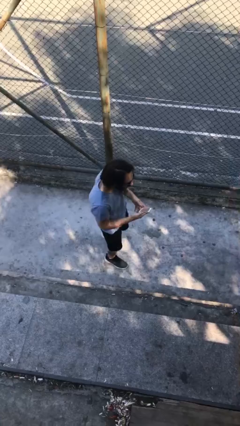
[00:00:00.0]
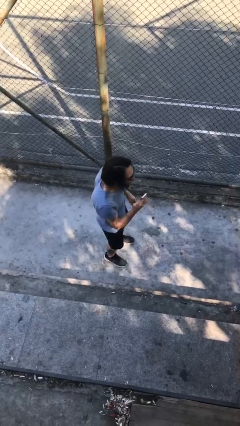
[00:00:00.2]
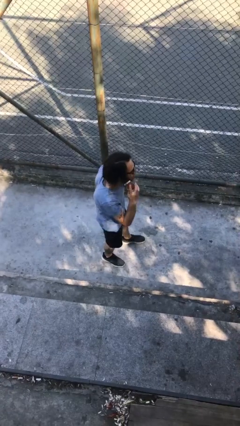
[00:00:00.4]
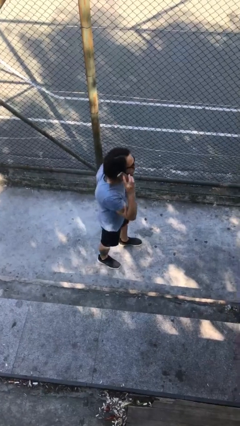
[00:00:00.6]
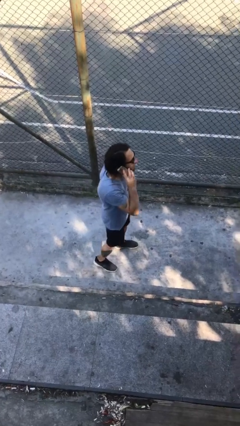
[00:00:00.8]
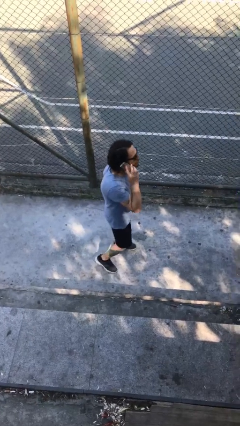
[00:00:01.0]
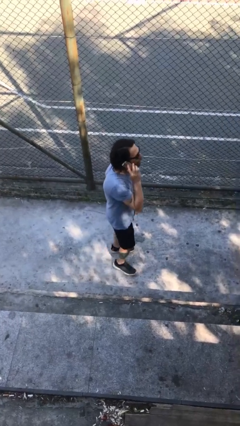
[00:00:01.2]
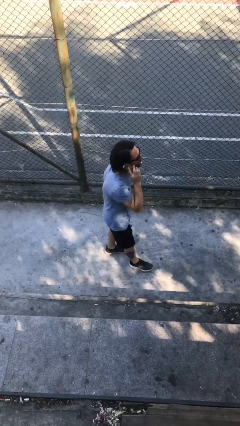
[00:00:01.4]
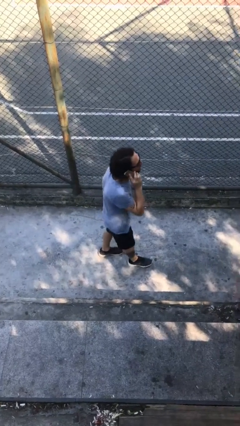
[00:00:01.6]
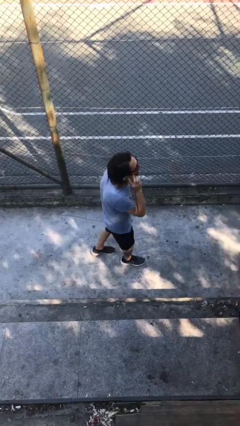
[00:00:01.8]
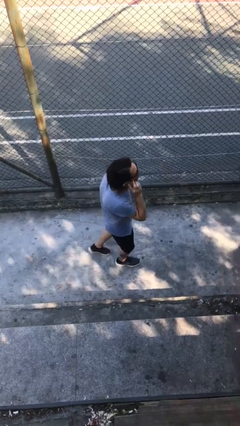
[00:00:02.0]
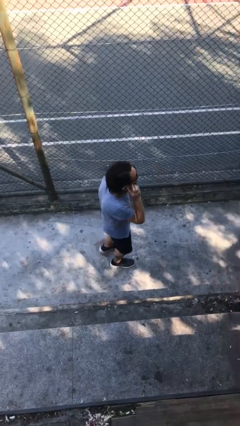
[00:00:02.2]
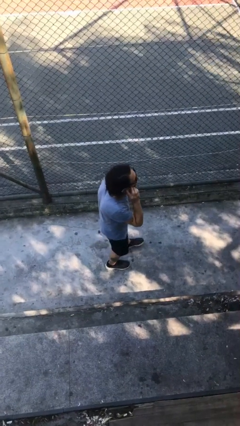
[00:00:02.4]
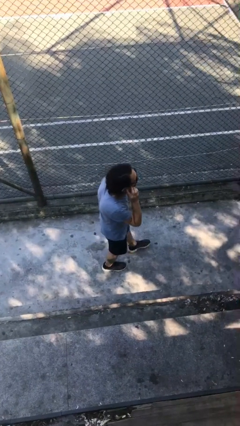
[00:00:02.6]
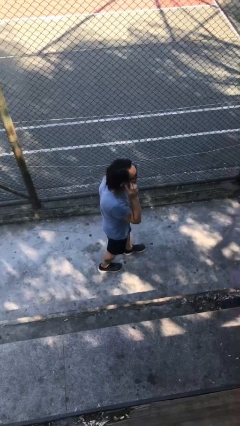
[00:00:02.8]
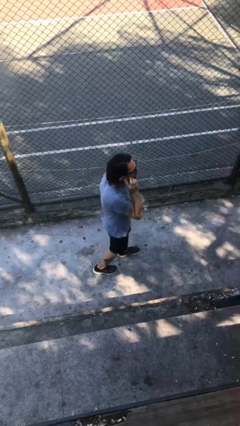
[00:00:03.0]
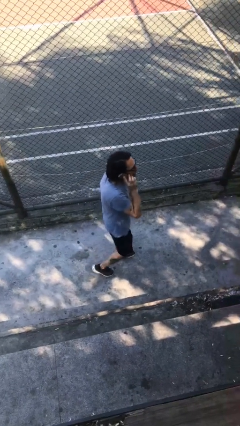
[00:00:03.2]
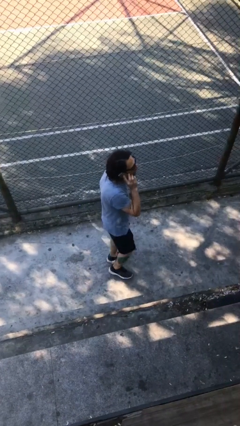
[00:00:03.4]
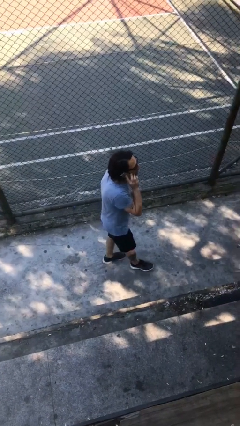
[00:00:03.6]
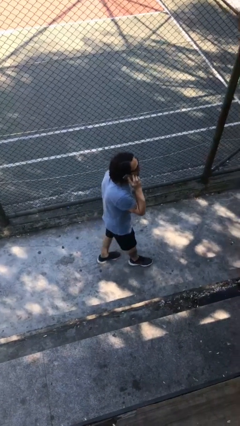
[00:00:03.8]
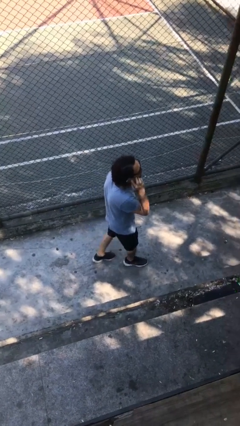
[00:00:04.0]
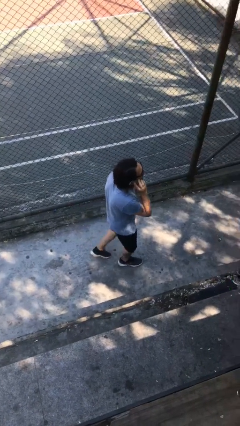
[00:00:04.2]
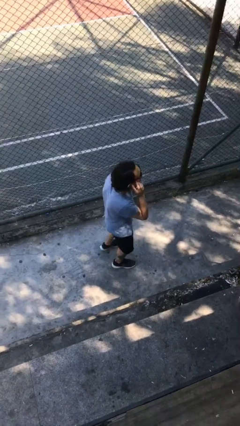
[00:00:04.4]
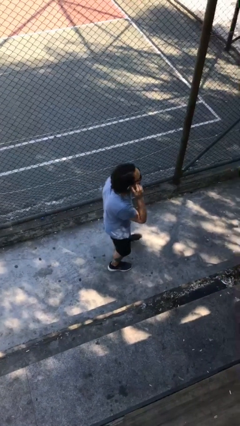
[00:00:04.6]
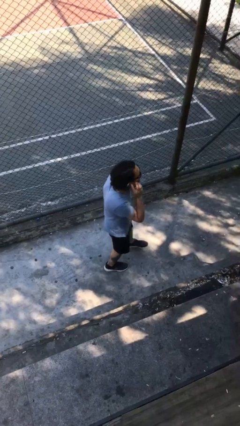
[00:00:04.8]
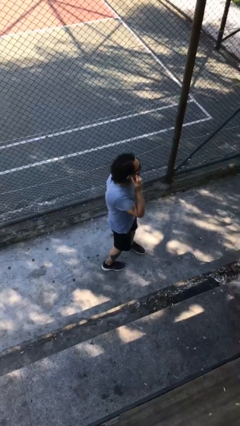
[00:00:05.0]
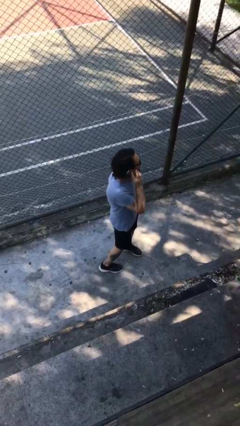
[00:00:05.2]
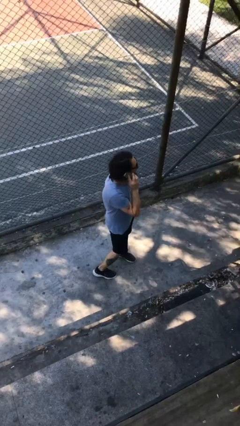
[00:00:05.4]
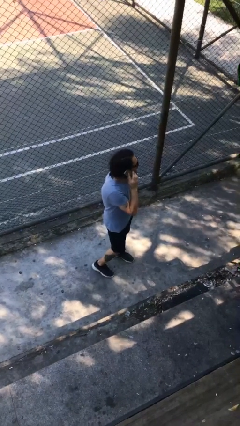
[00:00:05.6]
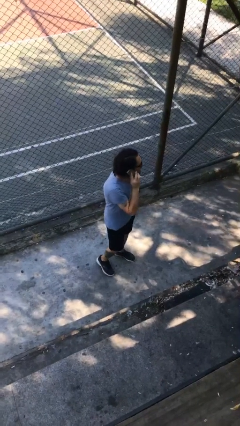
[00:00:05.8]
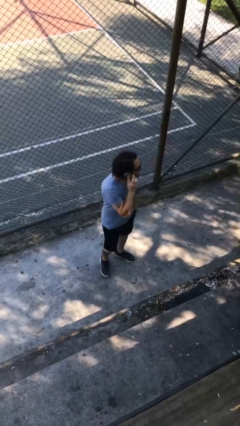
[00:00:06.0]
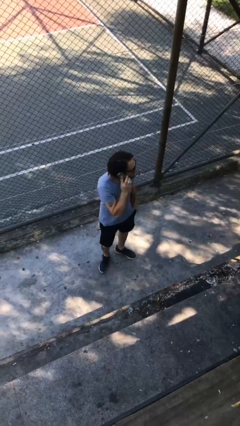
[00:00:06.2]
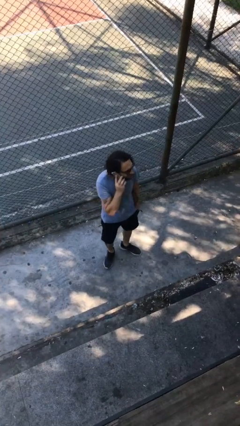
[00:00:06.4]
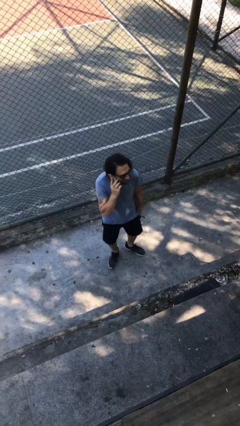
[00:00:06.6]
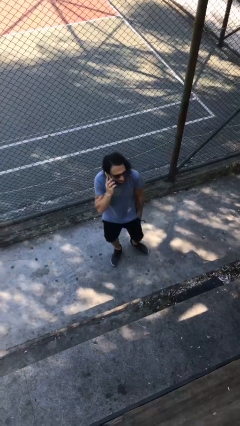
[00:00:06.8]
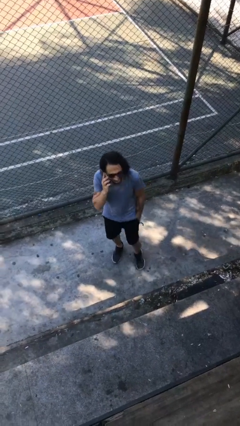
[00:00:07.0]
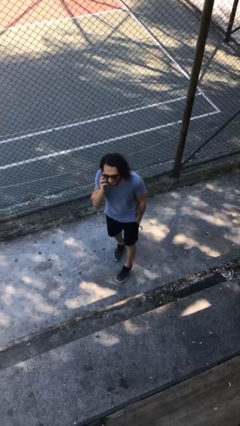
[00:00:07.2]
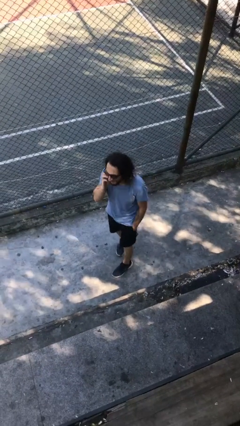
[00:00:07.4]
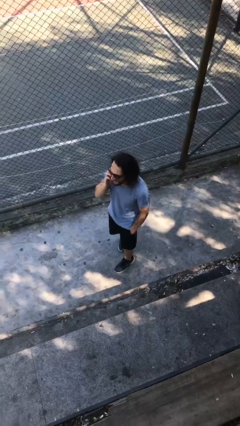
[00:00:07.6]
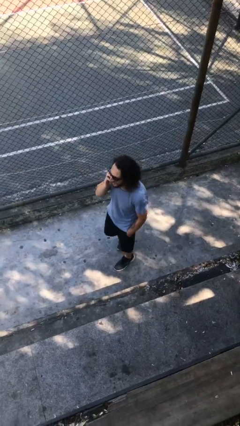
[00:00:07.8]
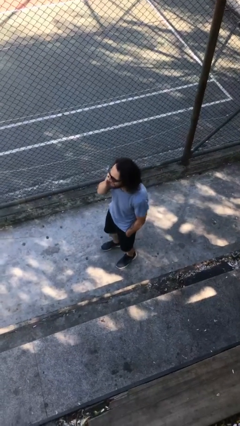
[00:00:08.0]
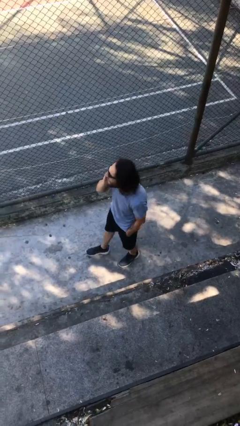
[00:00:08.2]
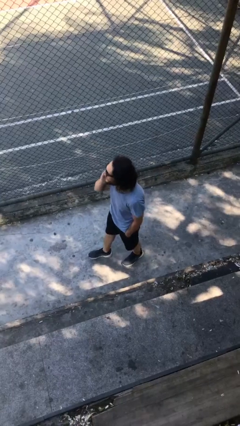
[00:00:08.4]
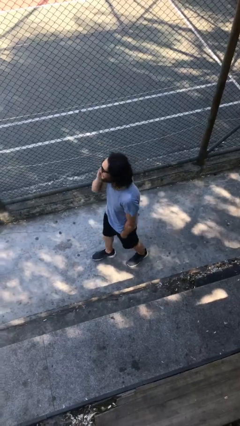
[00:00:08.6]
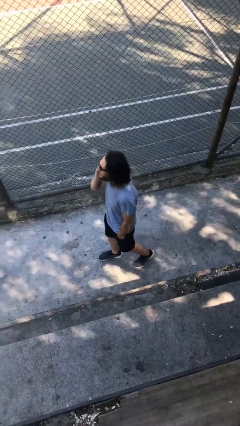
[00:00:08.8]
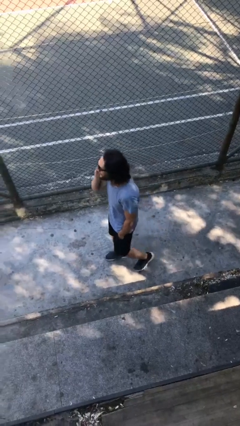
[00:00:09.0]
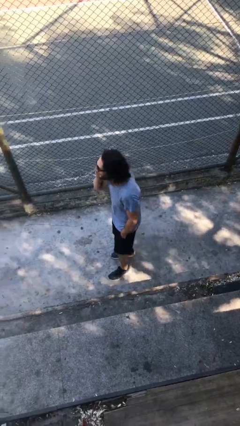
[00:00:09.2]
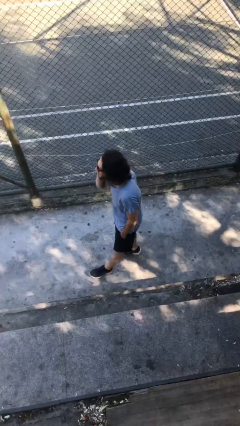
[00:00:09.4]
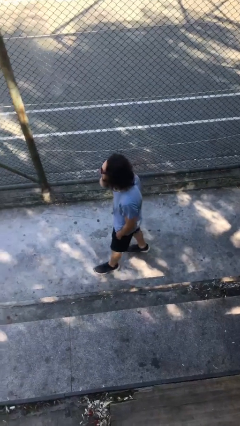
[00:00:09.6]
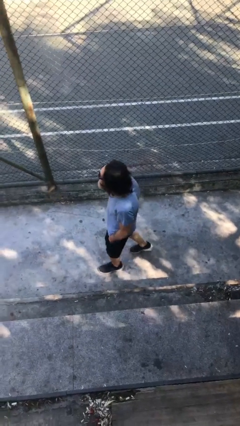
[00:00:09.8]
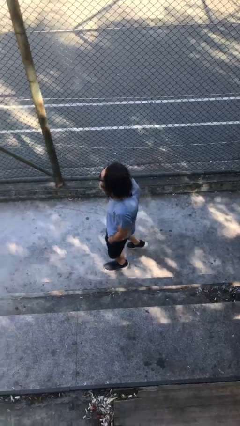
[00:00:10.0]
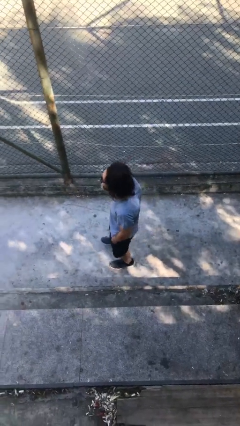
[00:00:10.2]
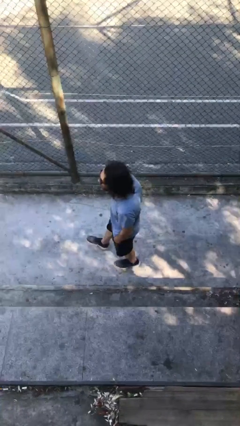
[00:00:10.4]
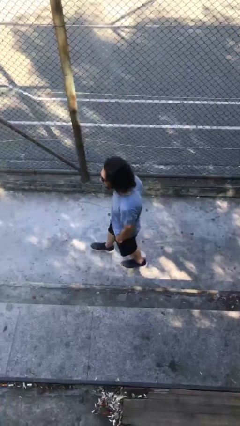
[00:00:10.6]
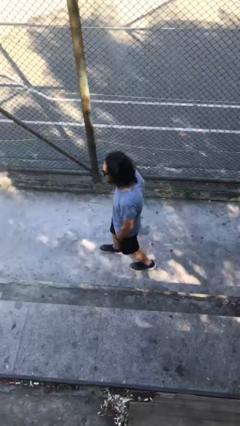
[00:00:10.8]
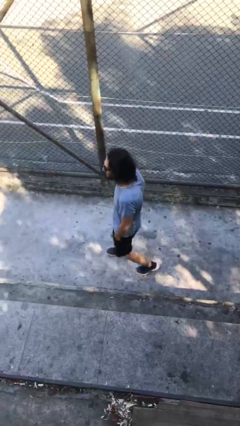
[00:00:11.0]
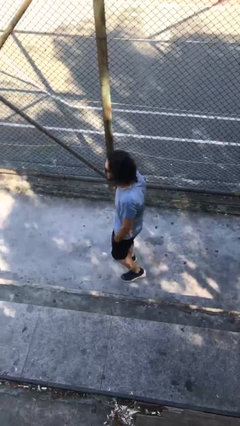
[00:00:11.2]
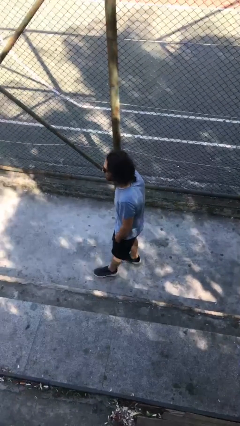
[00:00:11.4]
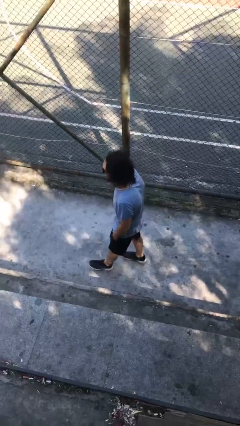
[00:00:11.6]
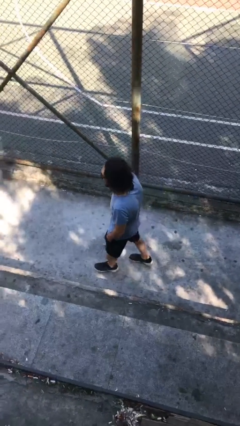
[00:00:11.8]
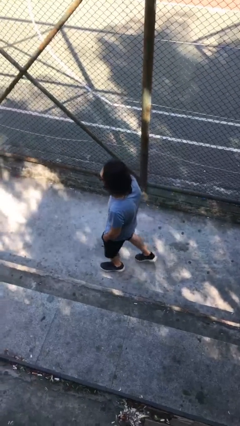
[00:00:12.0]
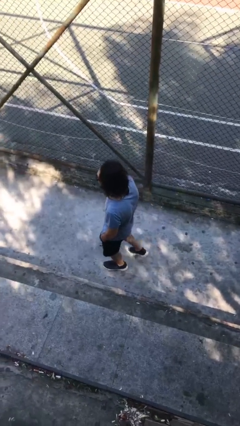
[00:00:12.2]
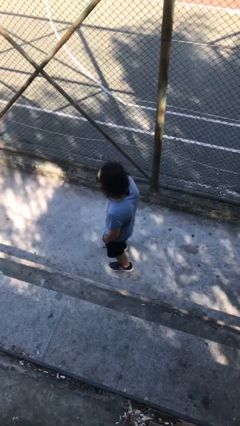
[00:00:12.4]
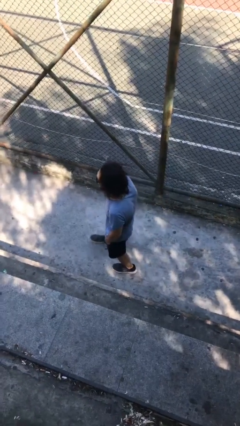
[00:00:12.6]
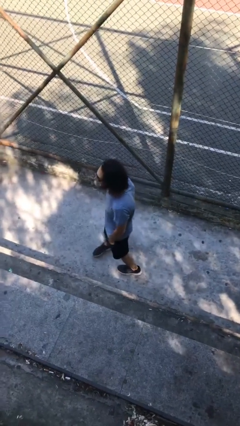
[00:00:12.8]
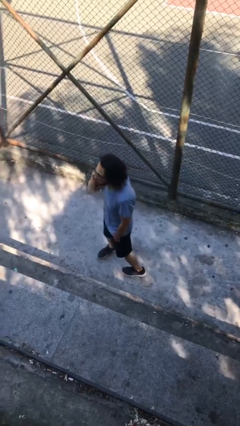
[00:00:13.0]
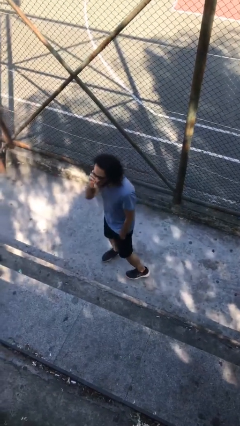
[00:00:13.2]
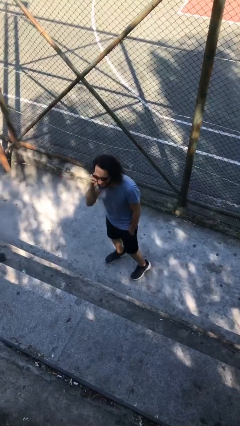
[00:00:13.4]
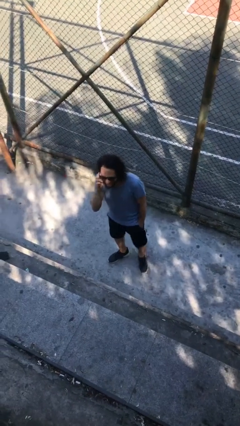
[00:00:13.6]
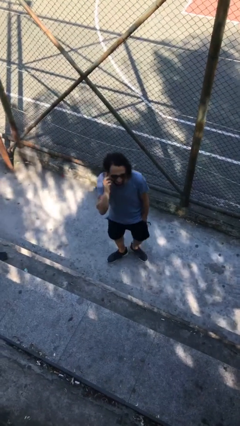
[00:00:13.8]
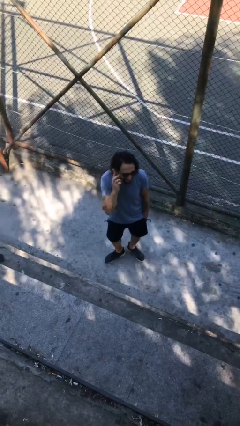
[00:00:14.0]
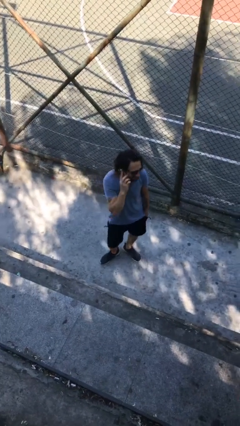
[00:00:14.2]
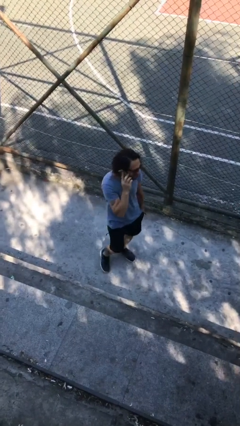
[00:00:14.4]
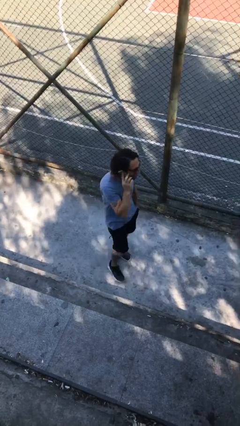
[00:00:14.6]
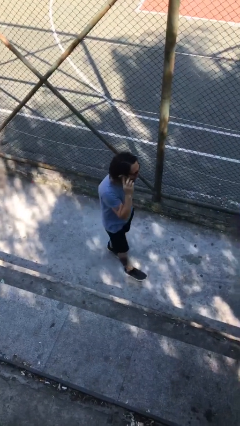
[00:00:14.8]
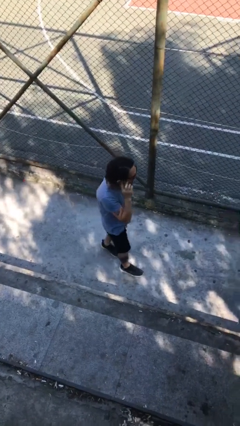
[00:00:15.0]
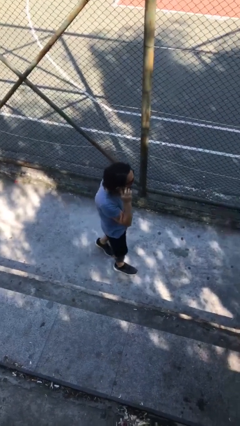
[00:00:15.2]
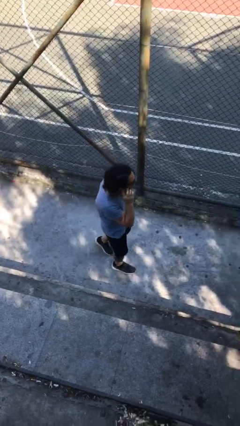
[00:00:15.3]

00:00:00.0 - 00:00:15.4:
person talks on phone

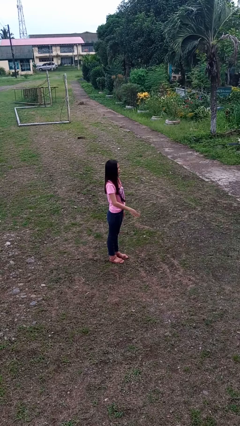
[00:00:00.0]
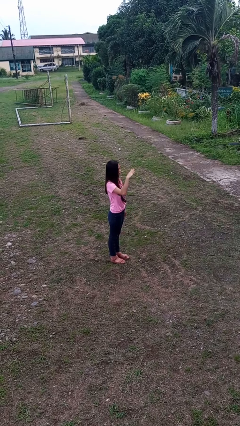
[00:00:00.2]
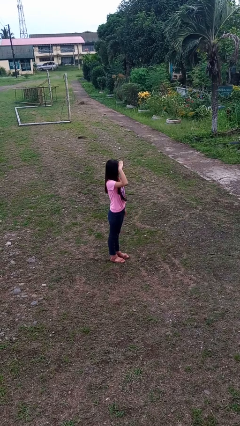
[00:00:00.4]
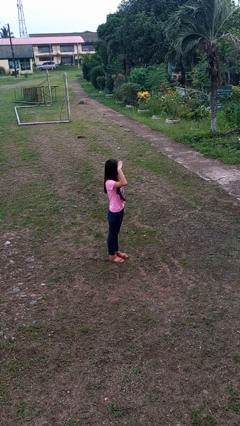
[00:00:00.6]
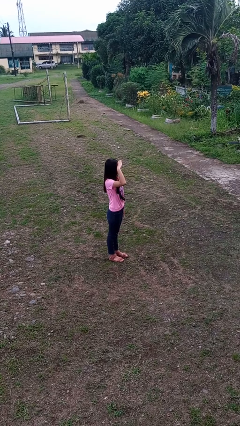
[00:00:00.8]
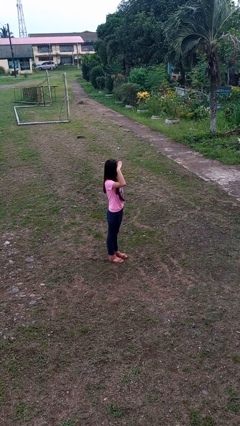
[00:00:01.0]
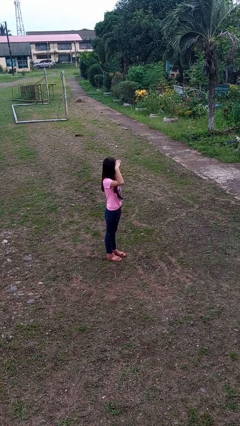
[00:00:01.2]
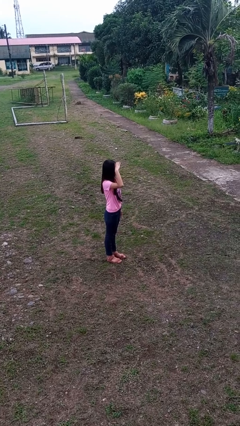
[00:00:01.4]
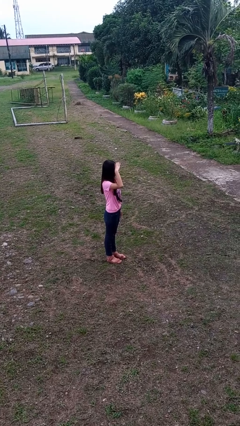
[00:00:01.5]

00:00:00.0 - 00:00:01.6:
person salutes

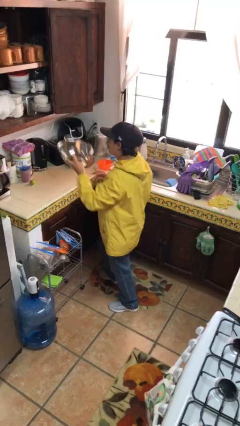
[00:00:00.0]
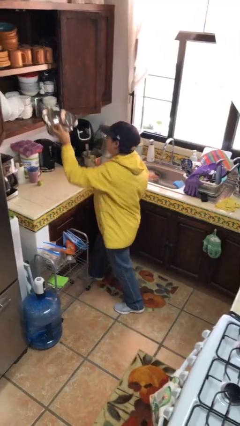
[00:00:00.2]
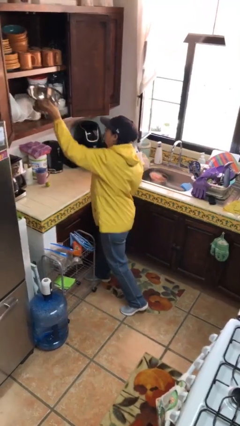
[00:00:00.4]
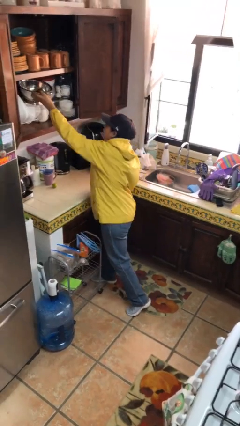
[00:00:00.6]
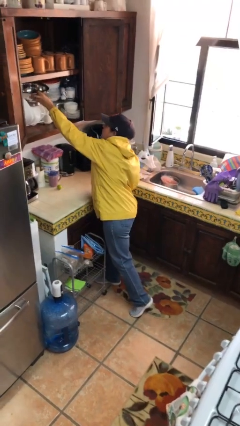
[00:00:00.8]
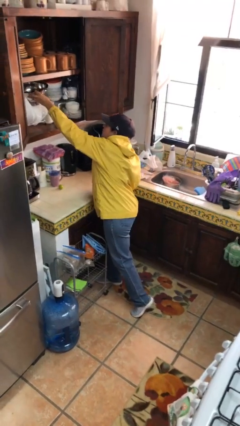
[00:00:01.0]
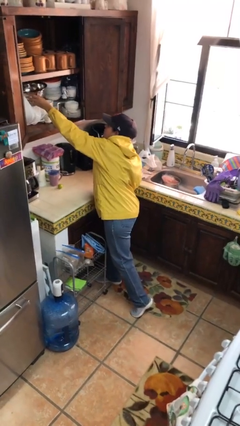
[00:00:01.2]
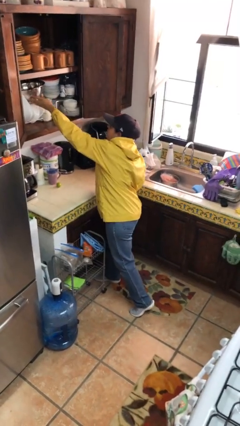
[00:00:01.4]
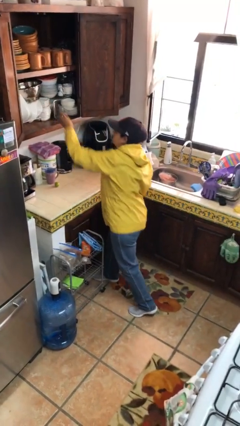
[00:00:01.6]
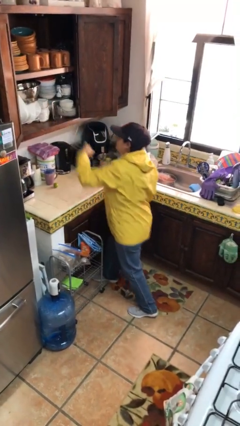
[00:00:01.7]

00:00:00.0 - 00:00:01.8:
person puts down object into cabinet
